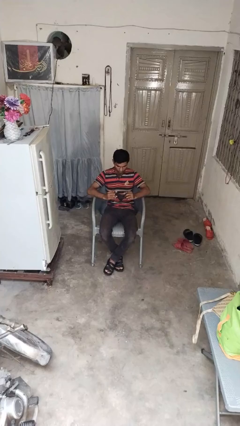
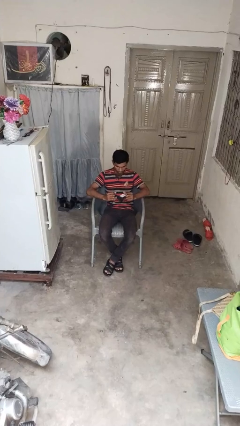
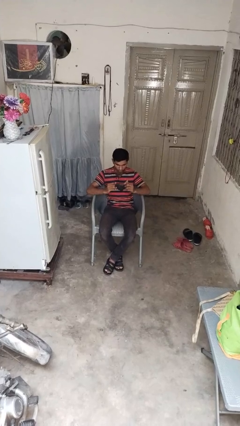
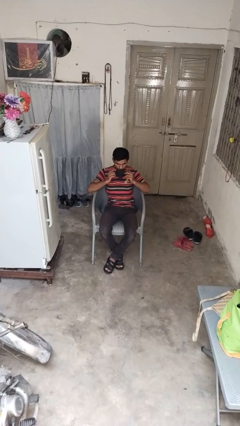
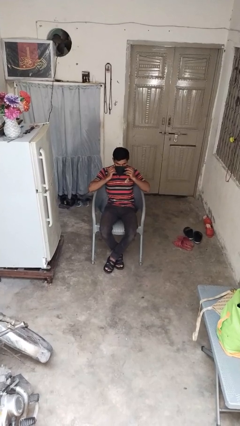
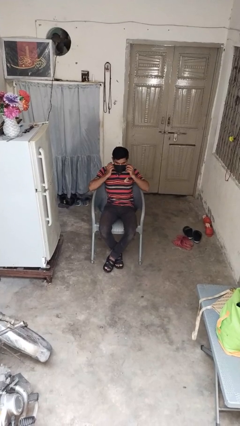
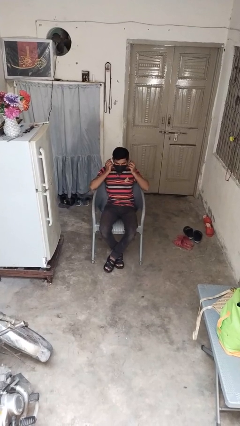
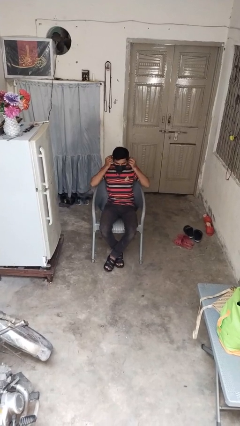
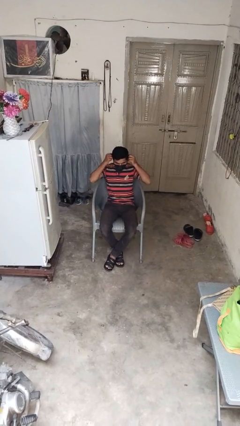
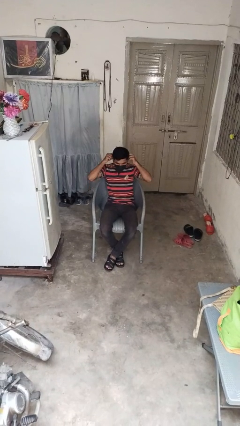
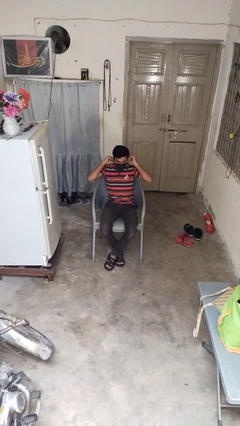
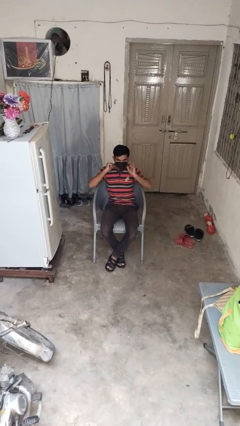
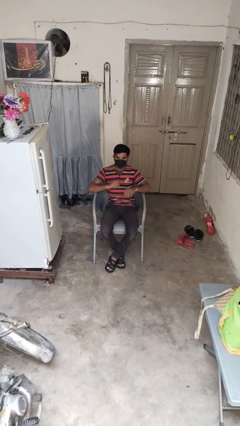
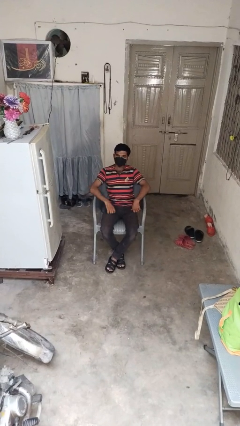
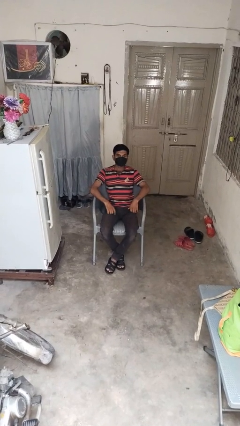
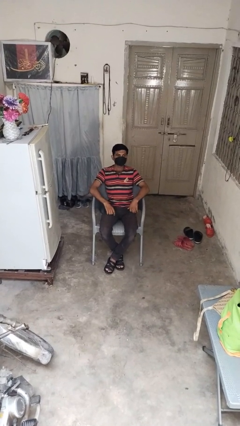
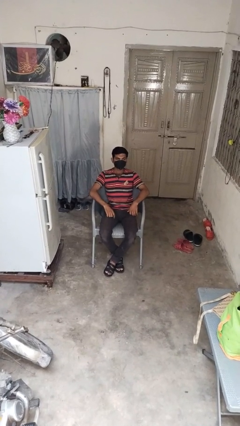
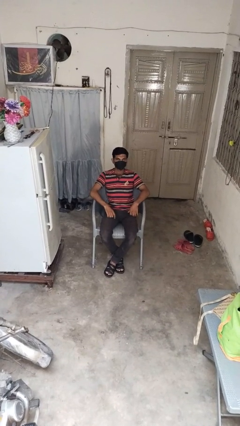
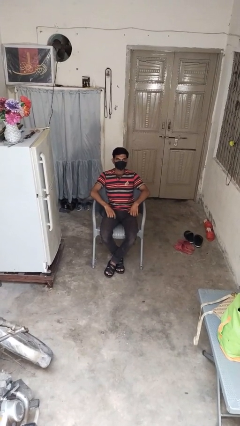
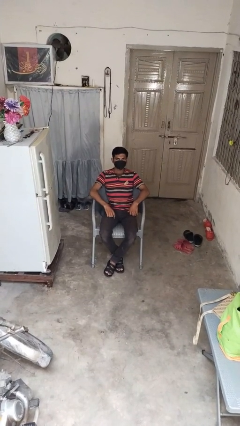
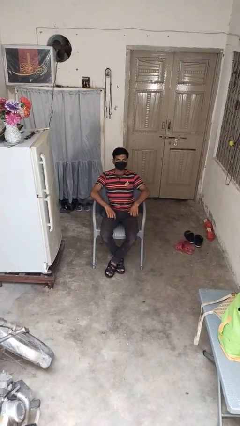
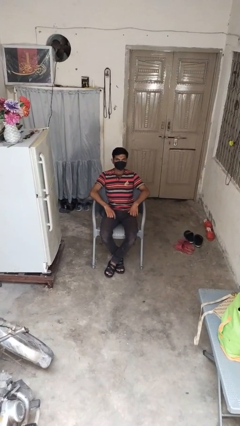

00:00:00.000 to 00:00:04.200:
person puts on facemask

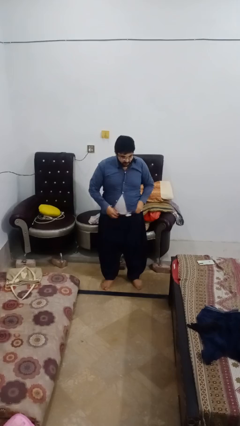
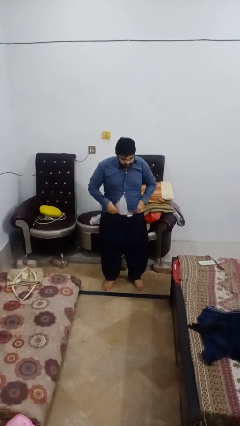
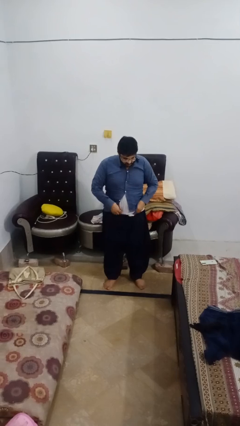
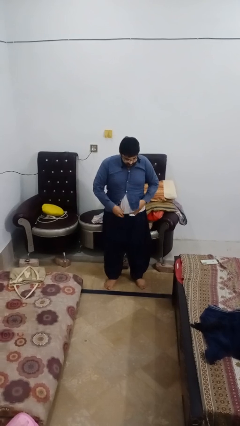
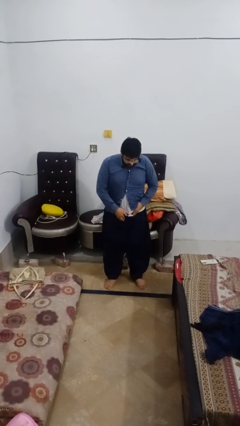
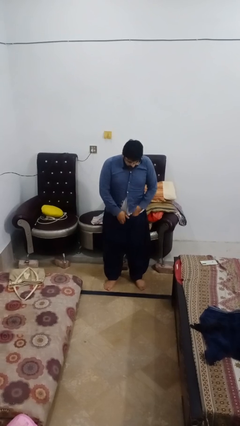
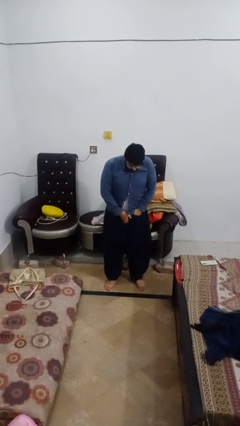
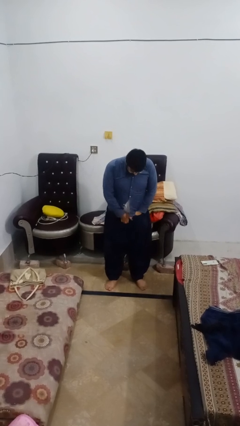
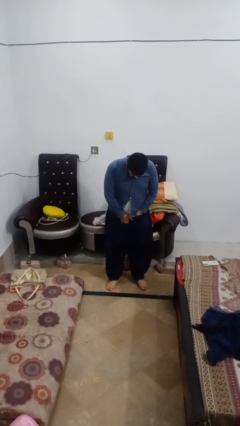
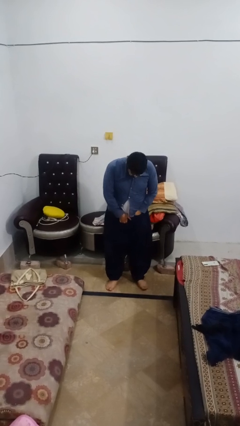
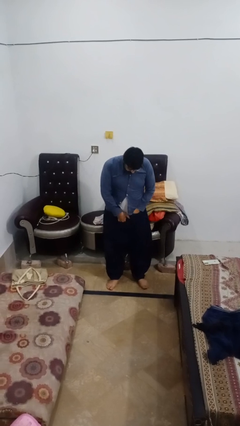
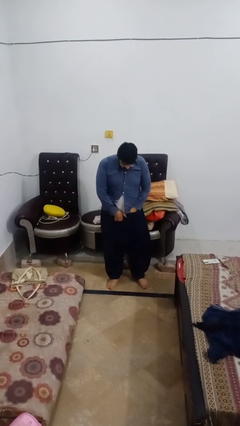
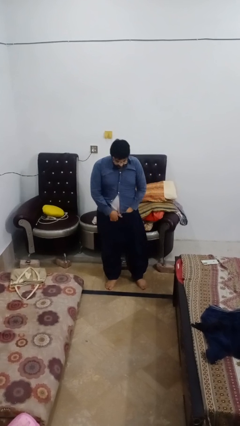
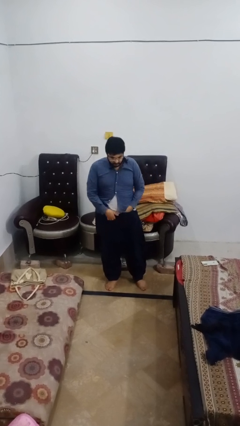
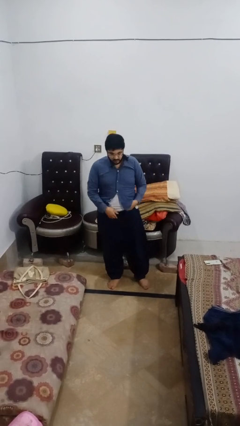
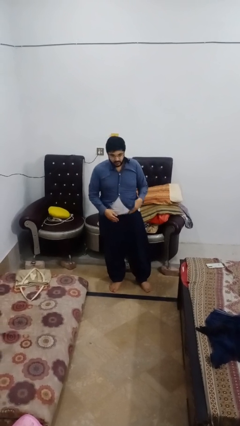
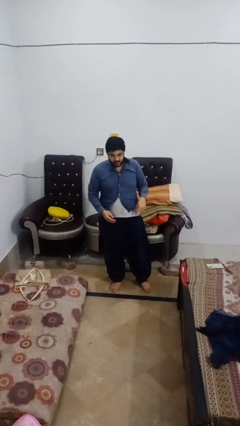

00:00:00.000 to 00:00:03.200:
person puts hands in back pockets

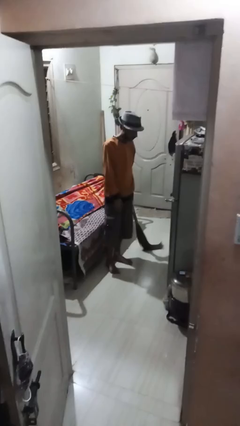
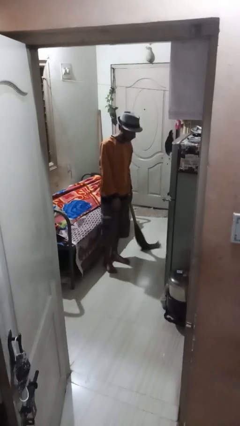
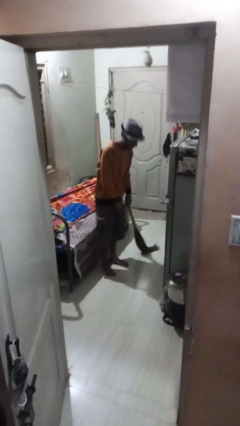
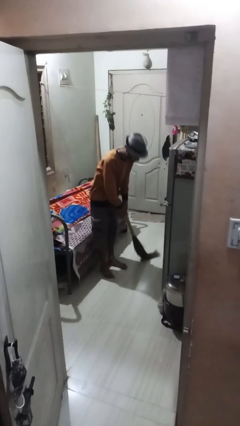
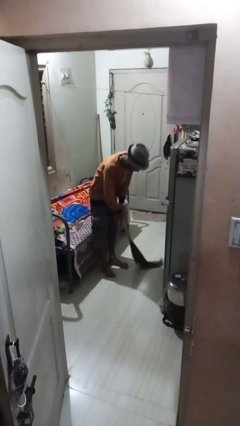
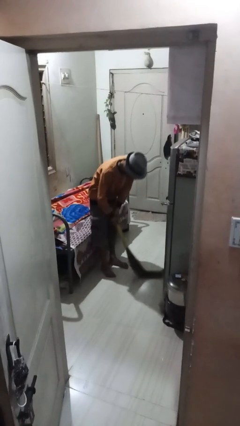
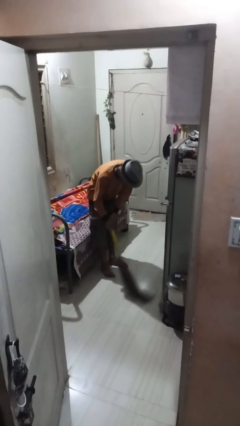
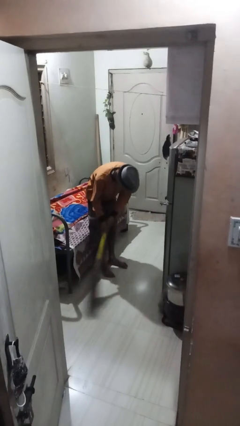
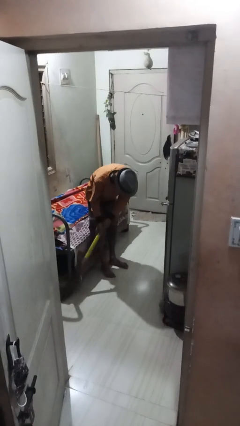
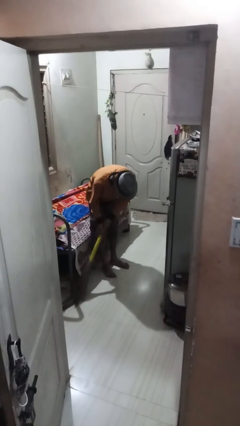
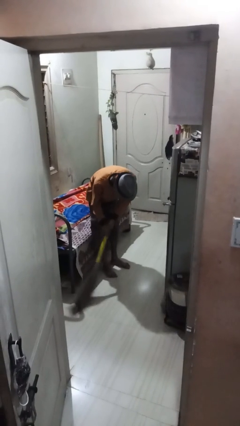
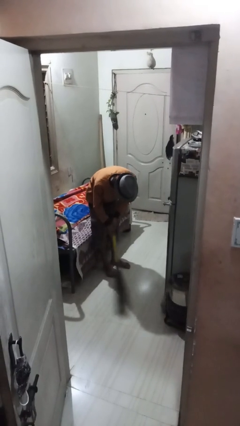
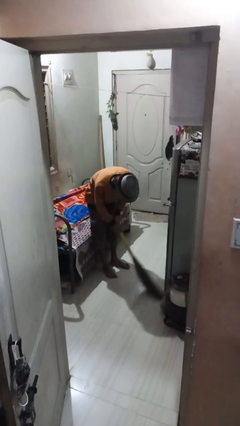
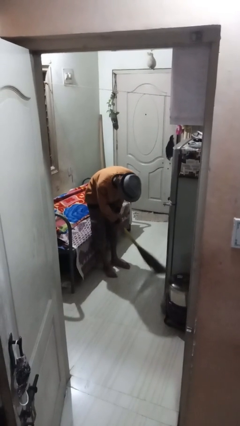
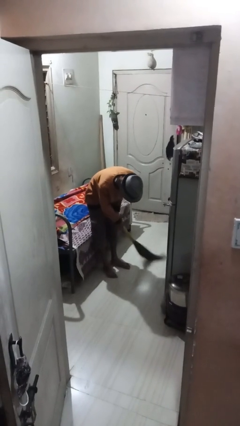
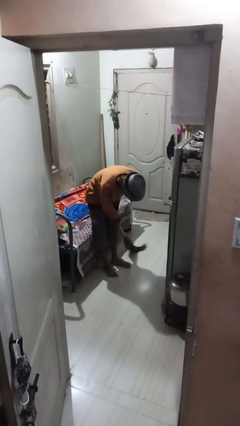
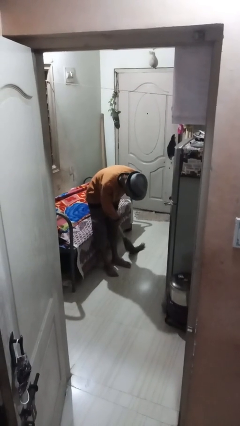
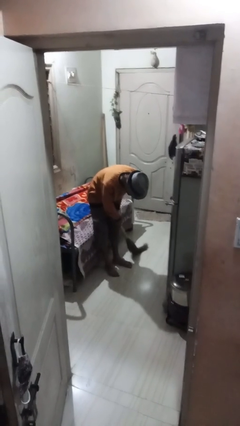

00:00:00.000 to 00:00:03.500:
person sweeps floor

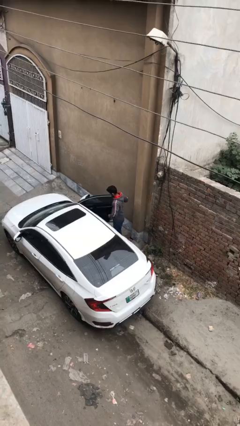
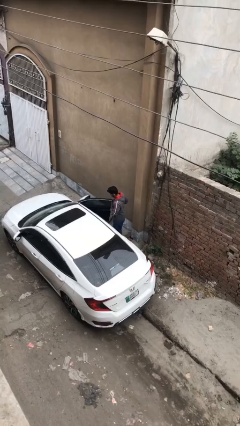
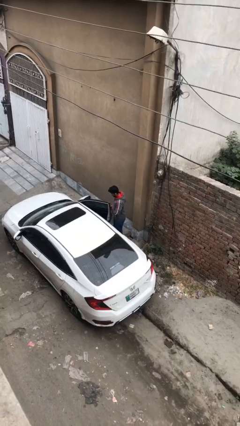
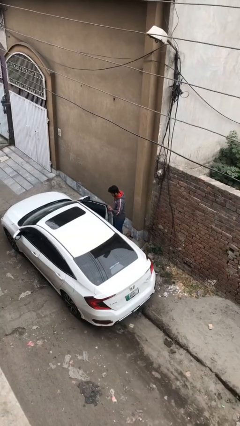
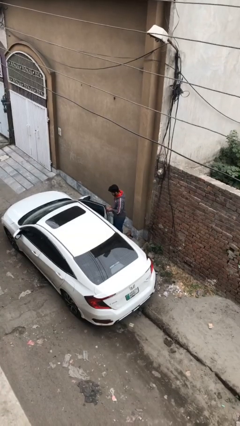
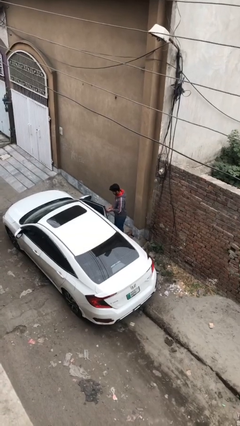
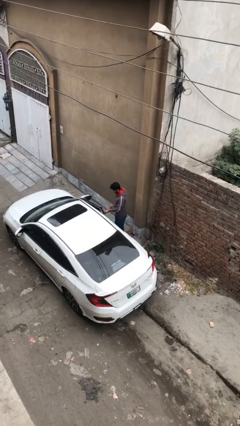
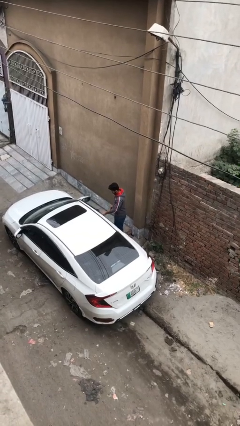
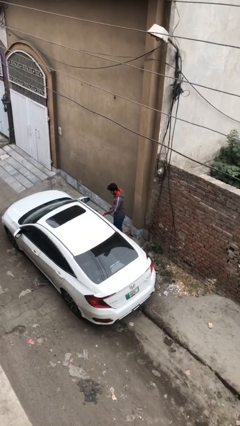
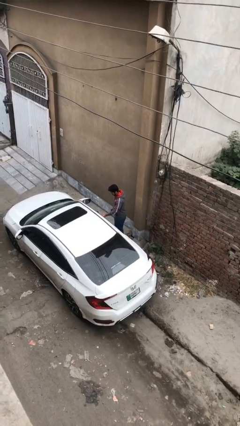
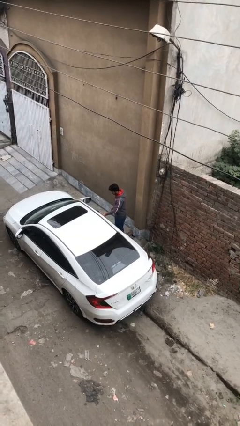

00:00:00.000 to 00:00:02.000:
person closes car door

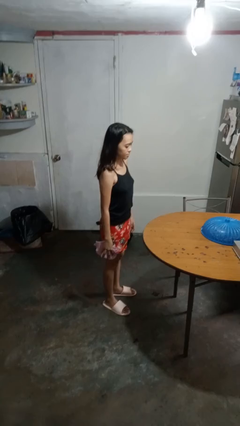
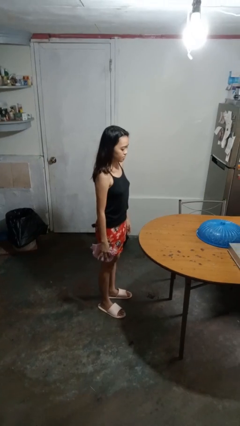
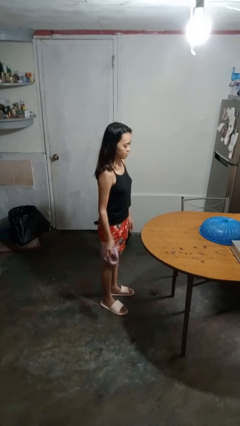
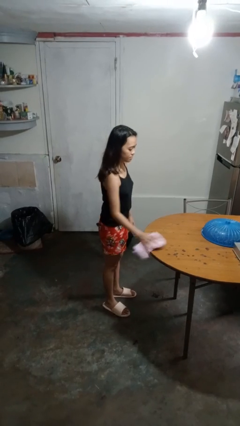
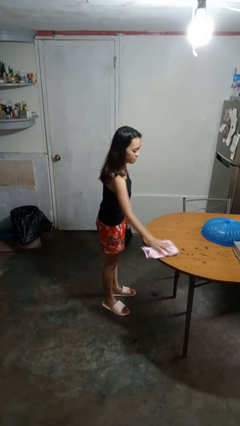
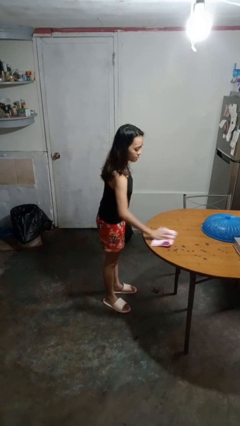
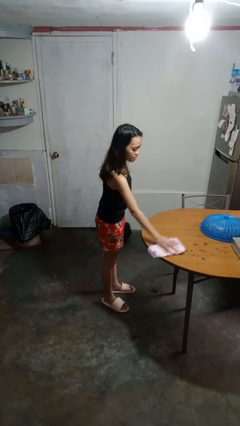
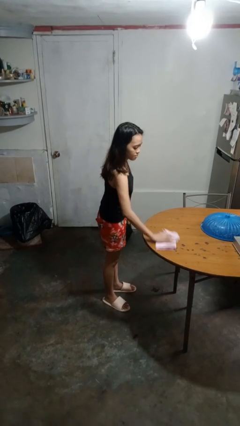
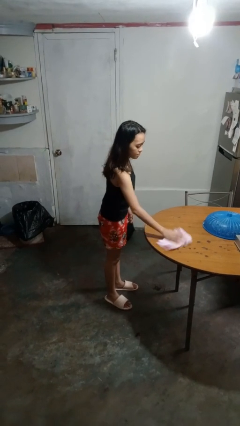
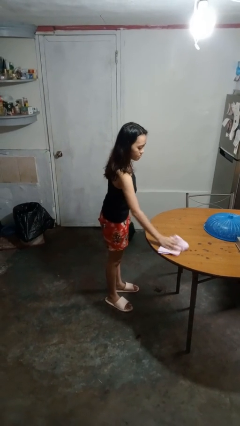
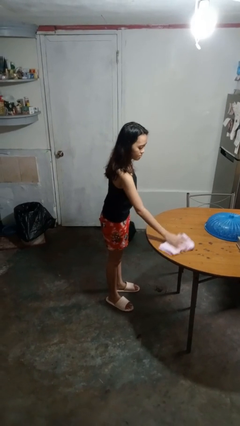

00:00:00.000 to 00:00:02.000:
person cleans table with rag

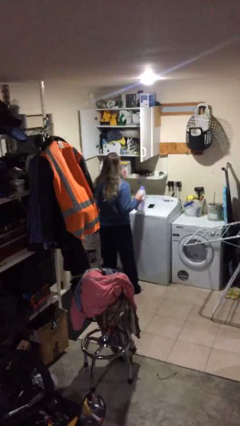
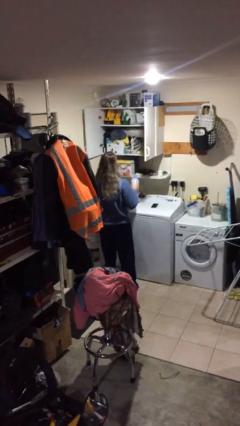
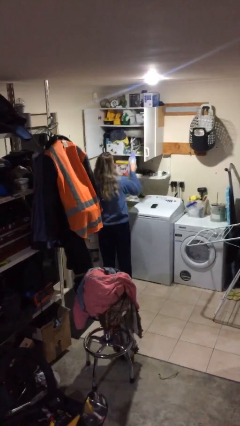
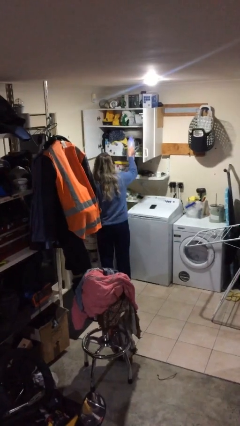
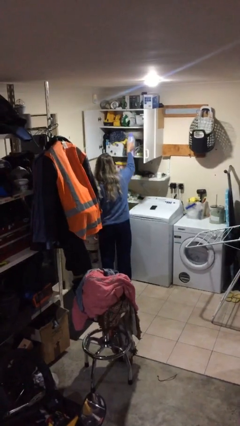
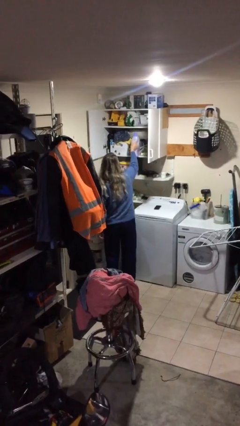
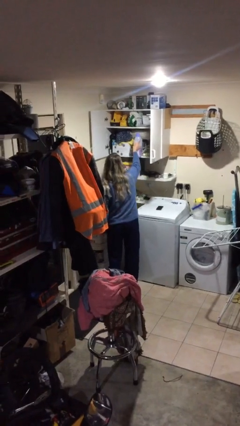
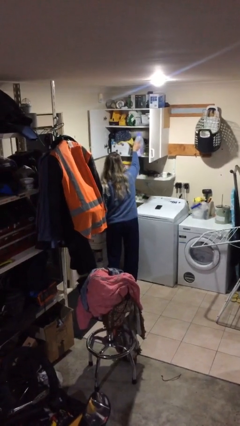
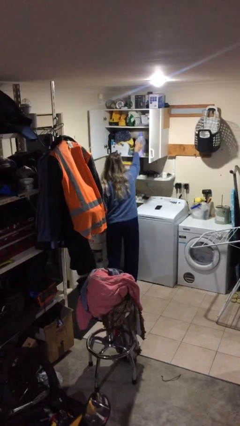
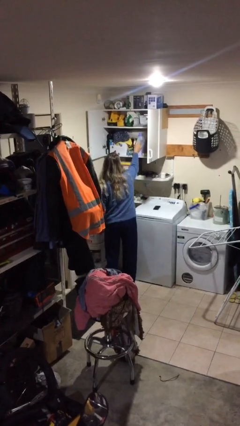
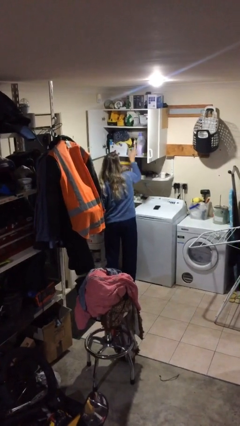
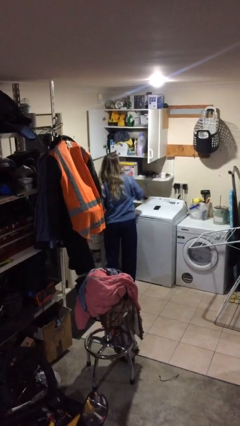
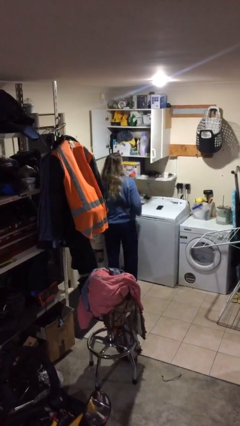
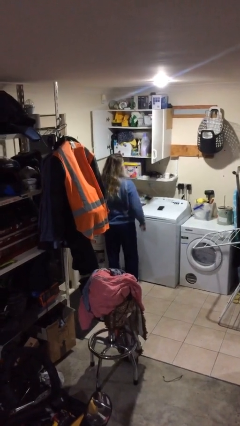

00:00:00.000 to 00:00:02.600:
person puts down object on shelf
